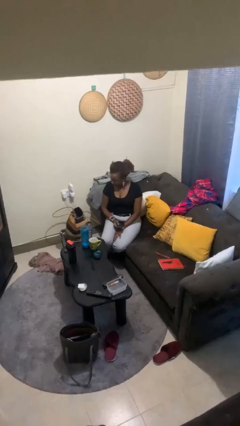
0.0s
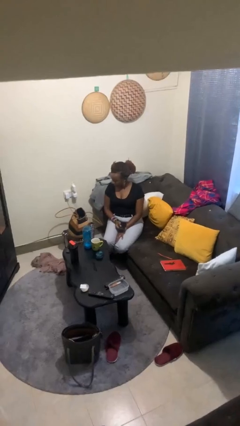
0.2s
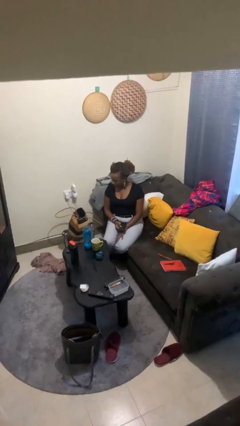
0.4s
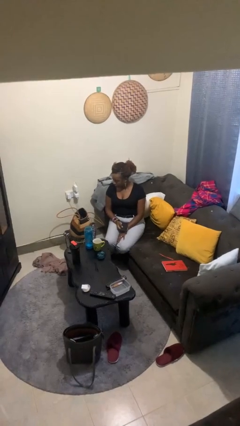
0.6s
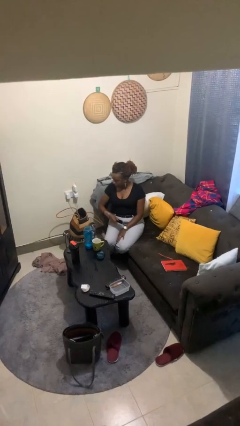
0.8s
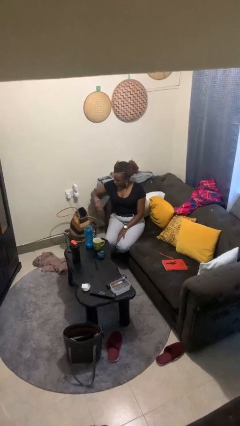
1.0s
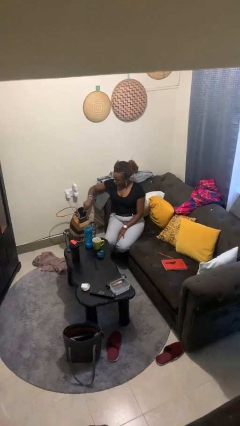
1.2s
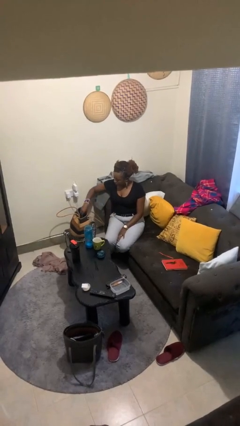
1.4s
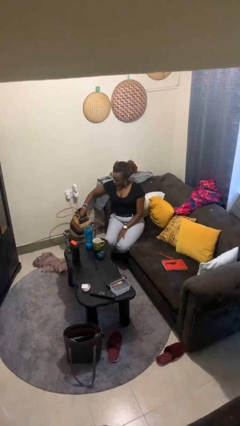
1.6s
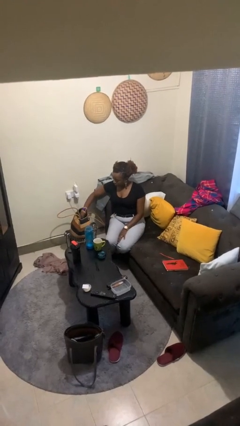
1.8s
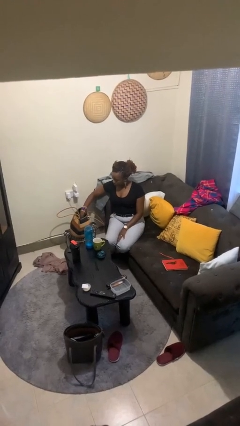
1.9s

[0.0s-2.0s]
person puts object into purse

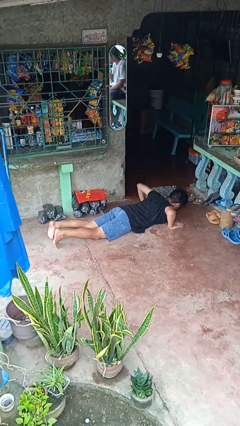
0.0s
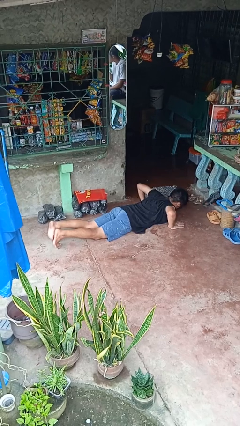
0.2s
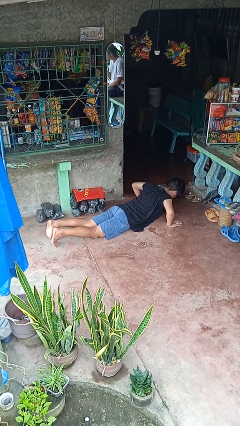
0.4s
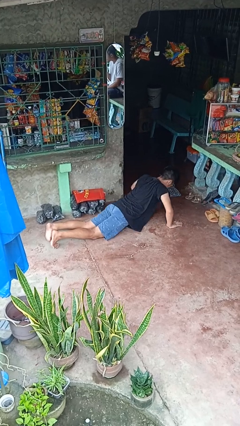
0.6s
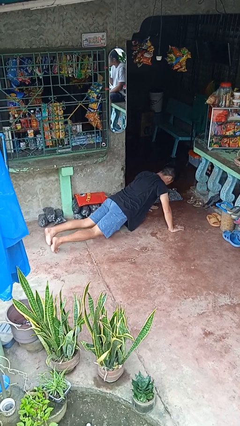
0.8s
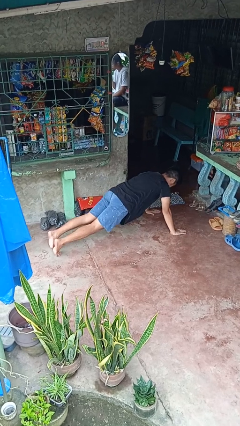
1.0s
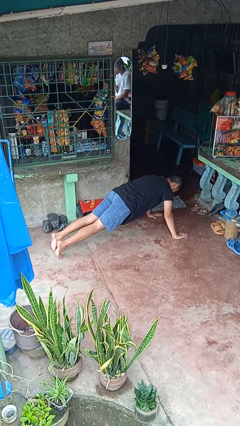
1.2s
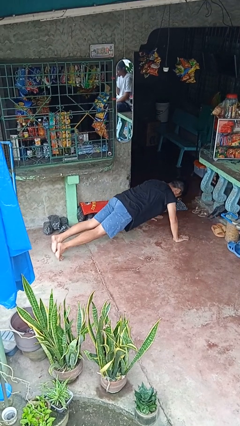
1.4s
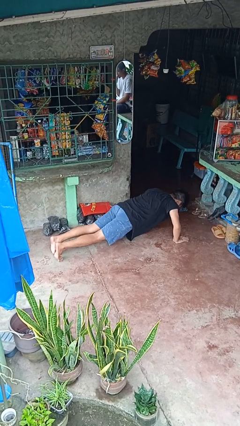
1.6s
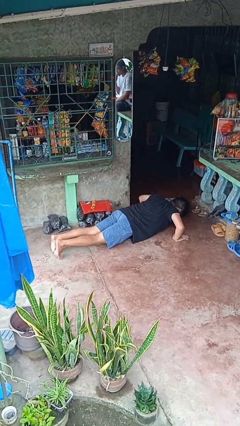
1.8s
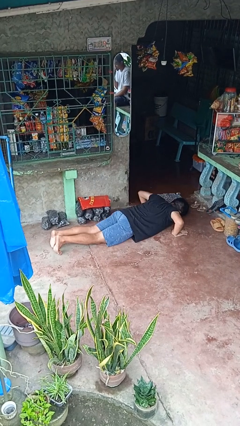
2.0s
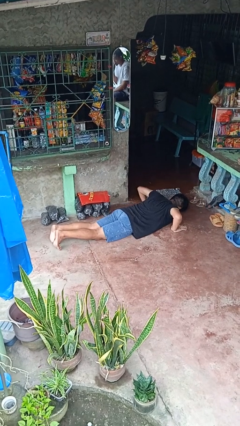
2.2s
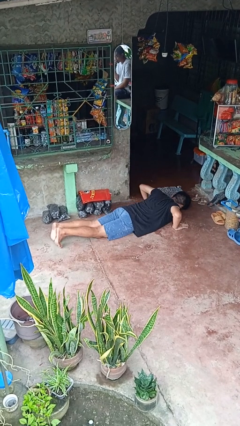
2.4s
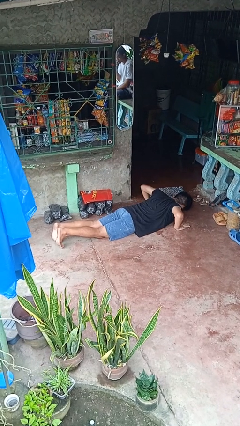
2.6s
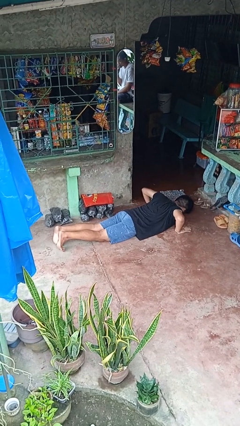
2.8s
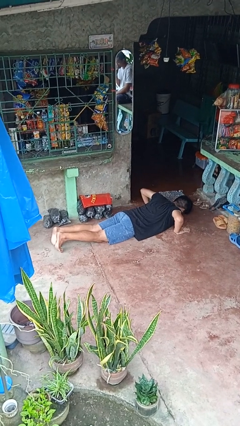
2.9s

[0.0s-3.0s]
person exercises with pushup

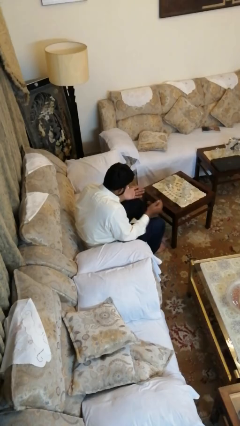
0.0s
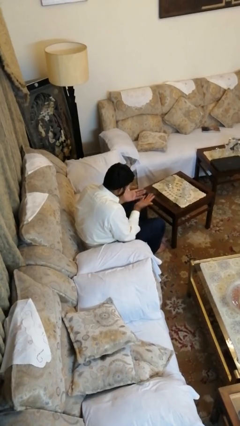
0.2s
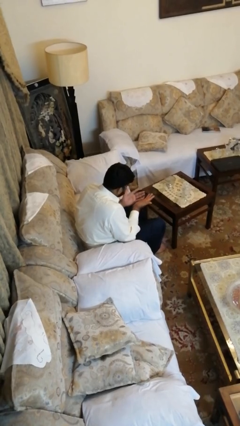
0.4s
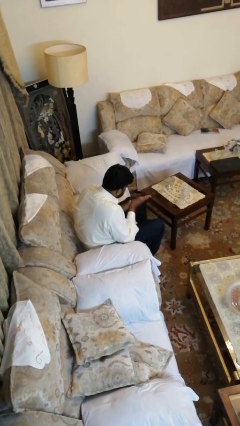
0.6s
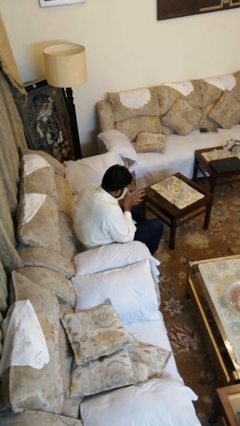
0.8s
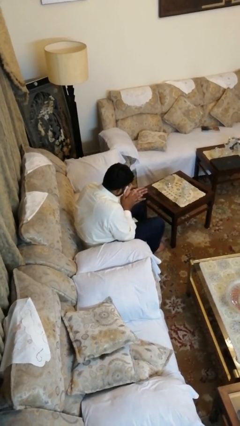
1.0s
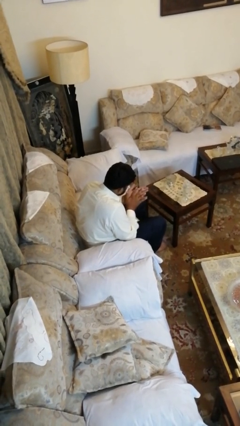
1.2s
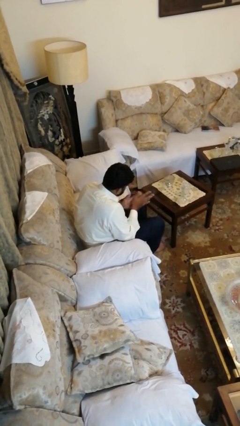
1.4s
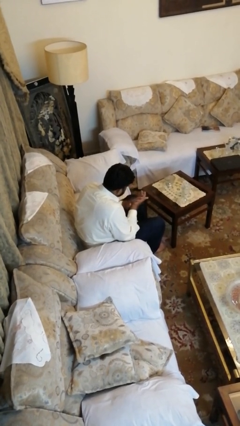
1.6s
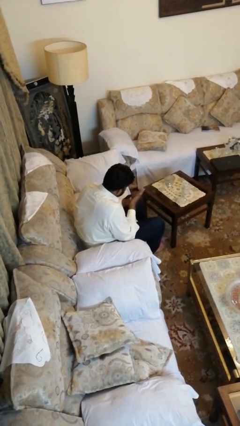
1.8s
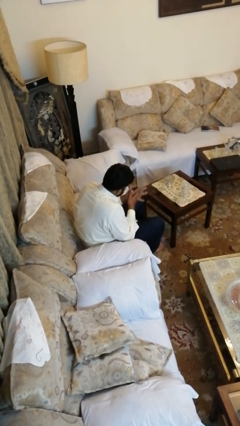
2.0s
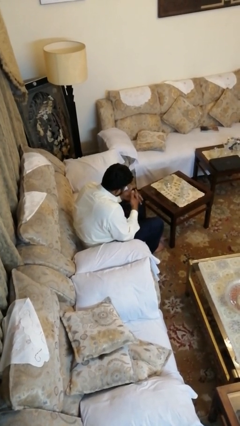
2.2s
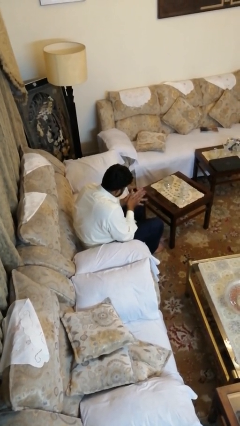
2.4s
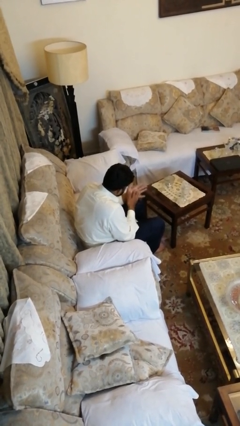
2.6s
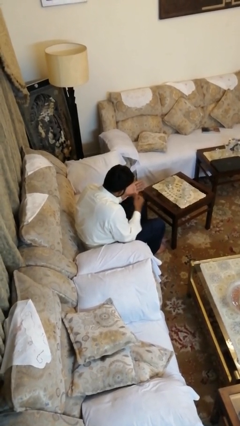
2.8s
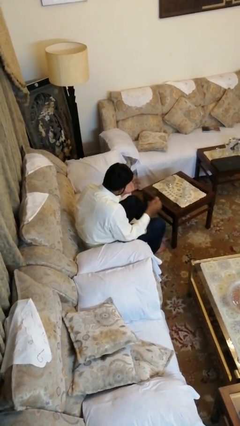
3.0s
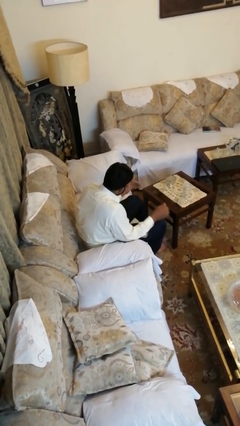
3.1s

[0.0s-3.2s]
person looks at hands in lap

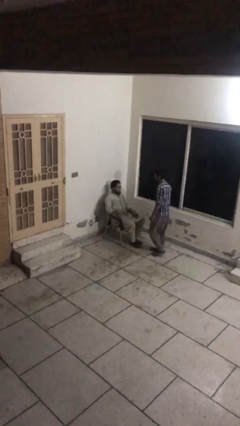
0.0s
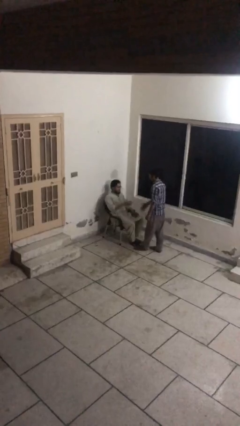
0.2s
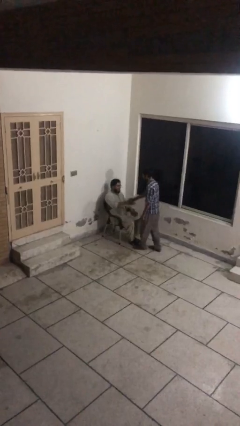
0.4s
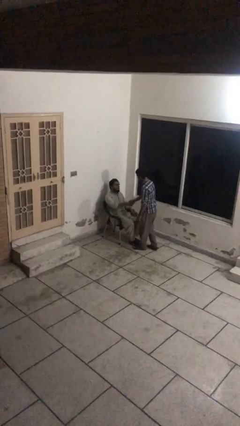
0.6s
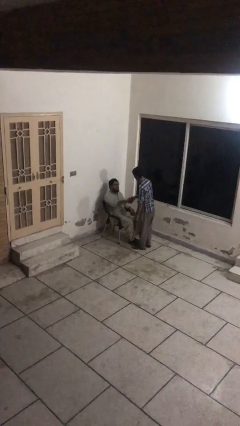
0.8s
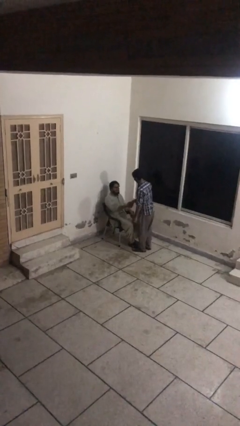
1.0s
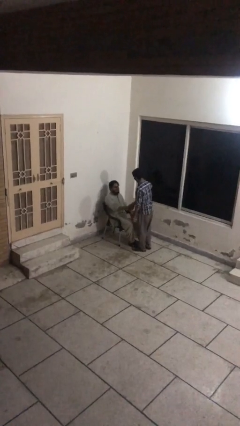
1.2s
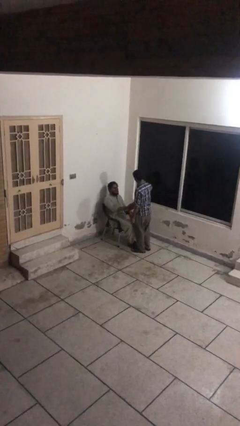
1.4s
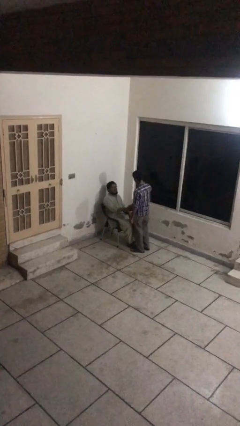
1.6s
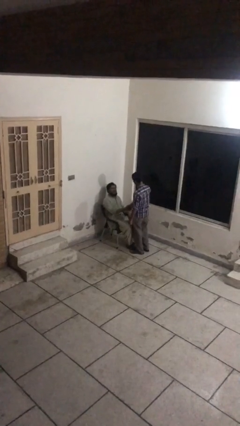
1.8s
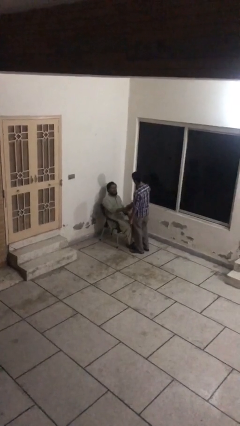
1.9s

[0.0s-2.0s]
person shakes hand

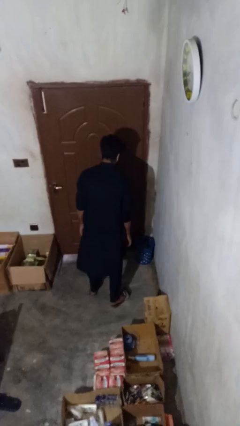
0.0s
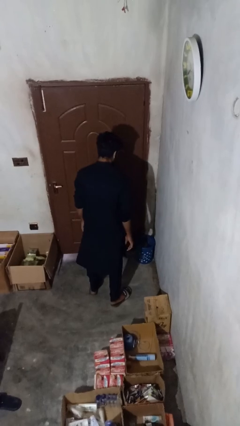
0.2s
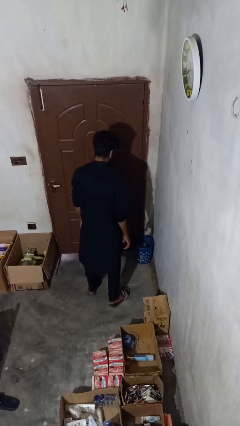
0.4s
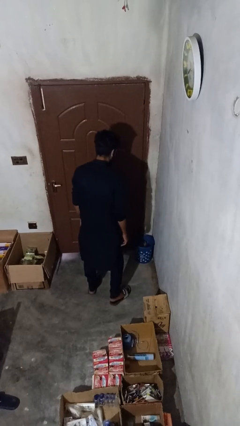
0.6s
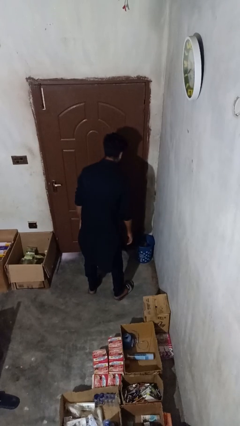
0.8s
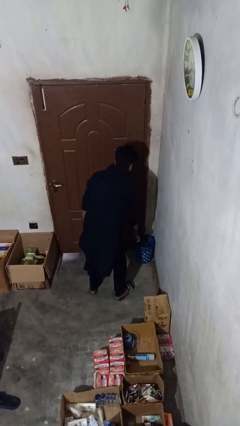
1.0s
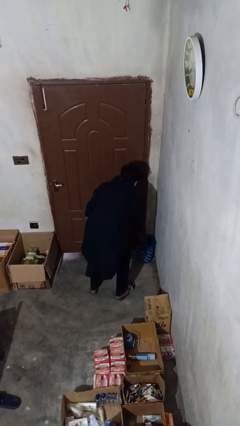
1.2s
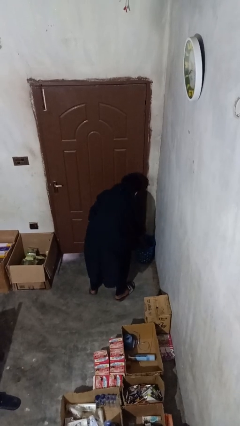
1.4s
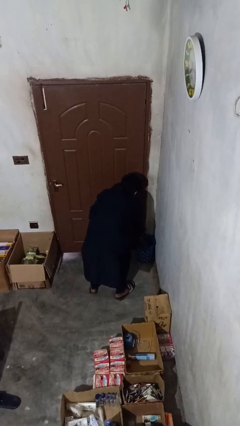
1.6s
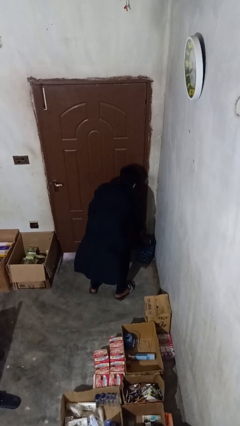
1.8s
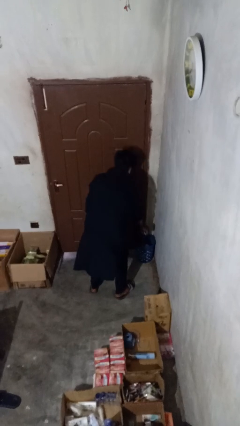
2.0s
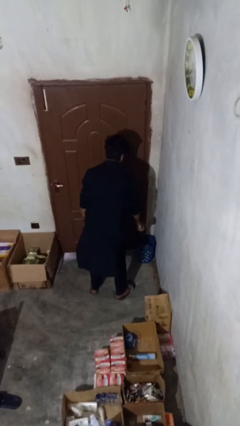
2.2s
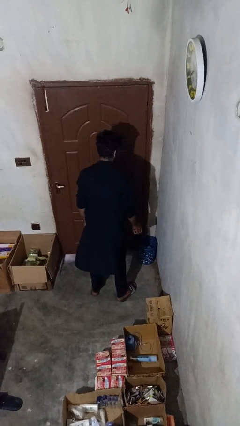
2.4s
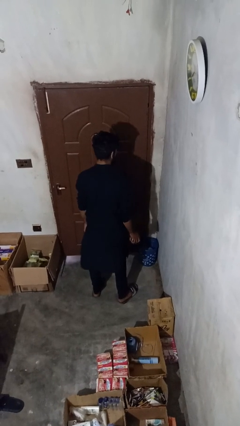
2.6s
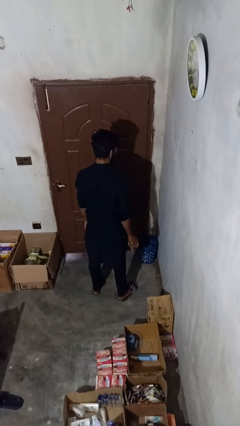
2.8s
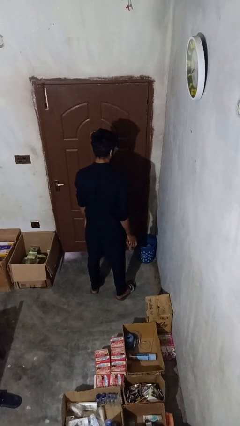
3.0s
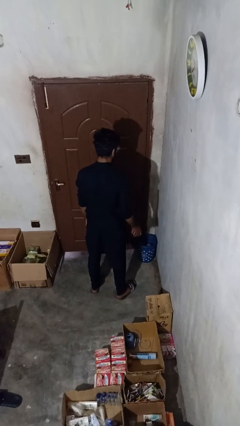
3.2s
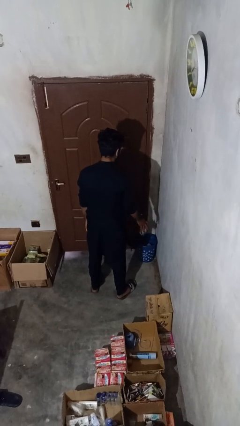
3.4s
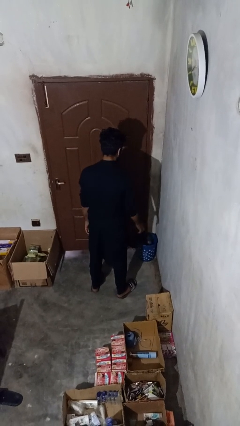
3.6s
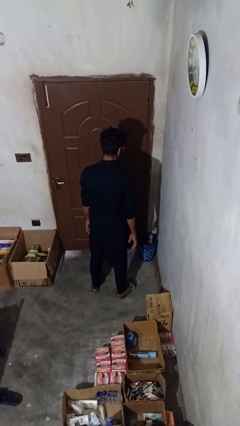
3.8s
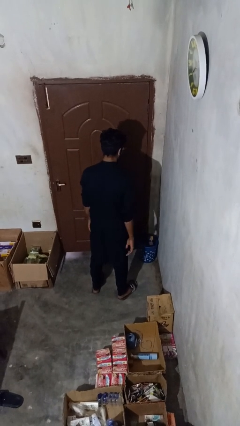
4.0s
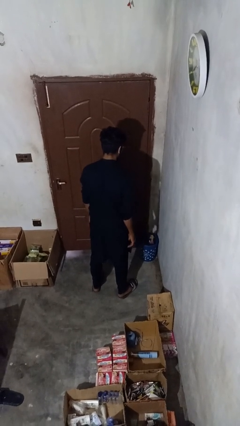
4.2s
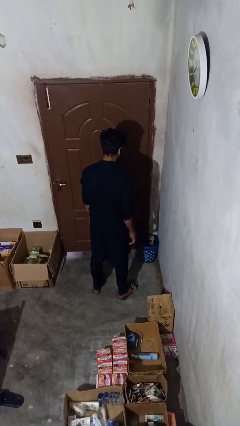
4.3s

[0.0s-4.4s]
person discards trash

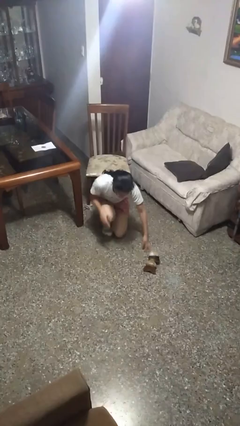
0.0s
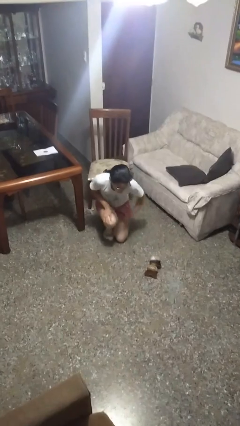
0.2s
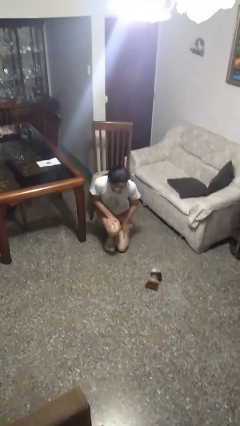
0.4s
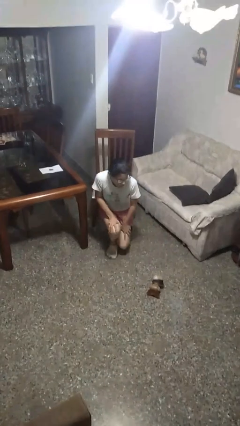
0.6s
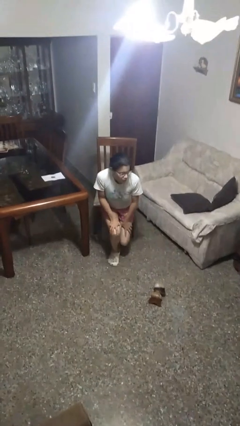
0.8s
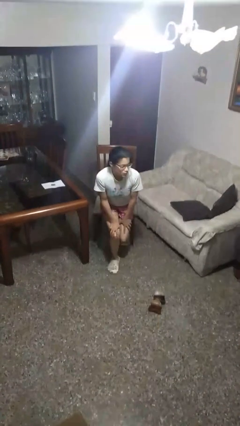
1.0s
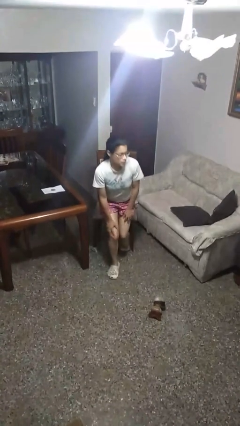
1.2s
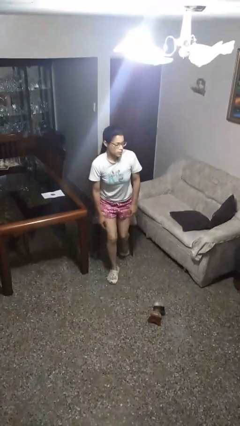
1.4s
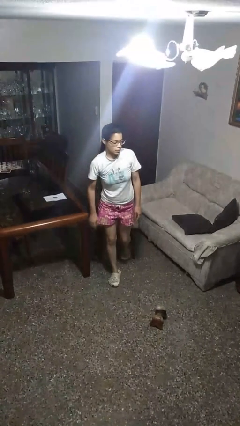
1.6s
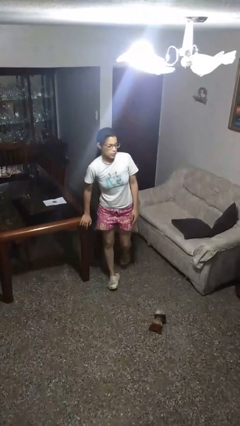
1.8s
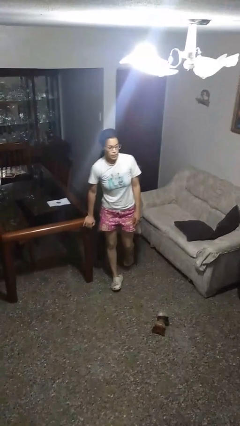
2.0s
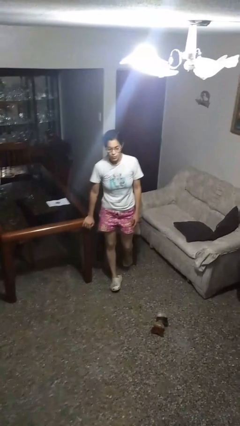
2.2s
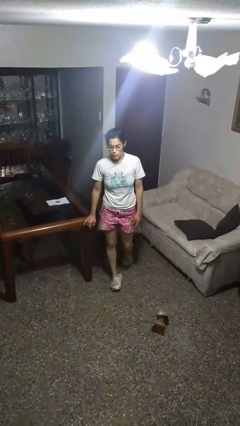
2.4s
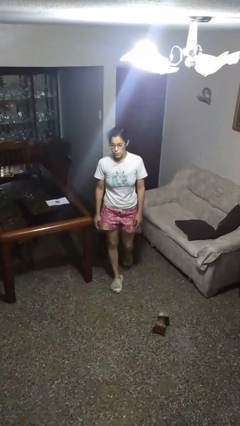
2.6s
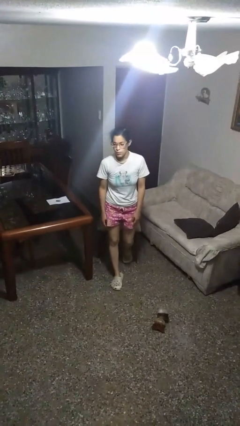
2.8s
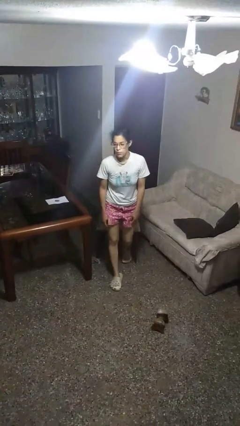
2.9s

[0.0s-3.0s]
person stands up from floor
